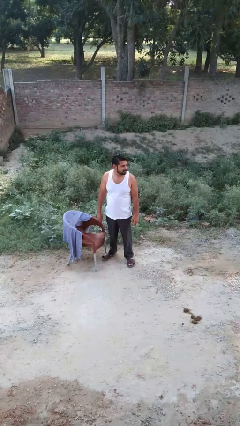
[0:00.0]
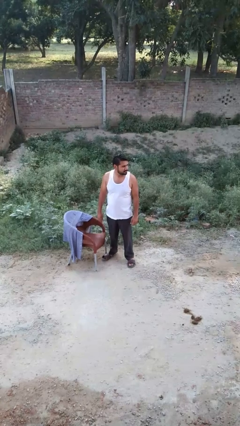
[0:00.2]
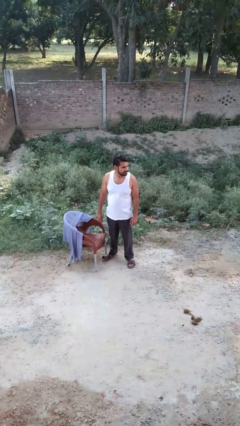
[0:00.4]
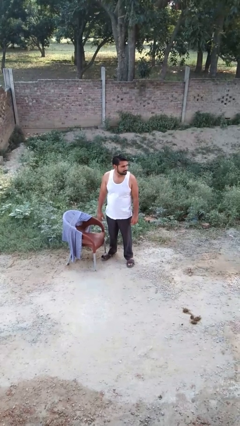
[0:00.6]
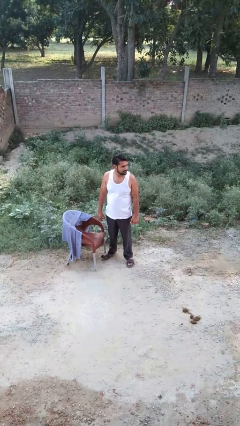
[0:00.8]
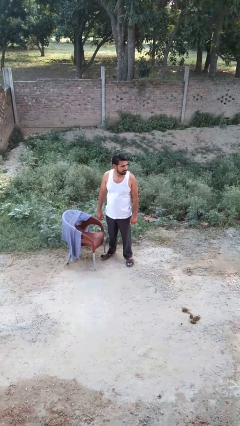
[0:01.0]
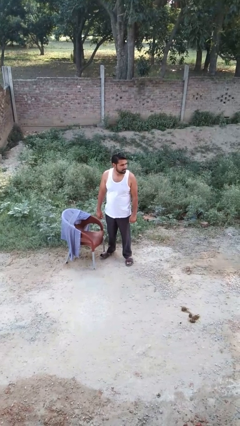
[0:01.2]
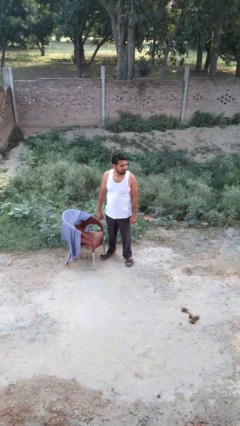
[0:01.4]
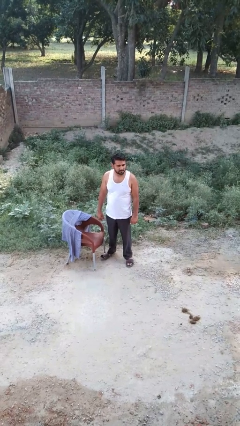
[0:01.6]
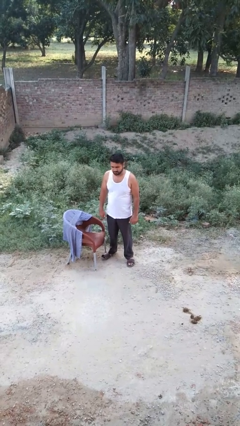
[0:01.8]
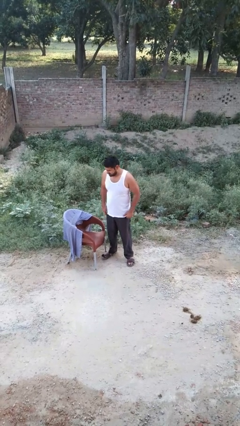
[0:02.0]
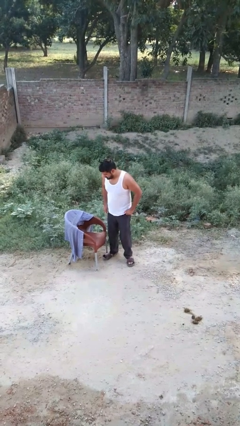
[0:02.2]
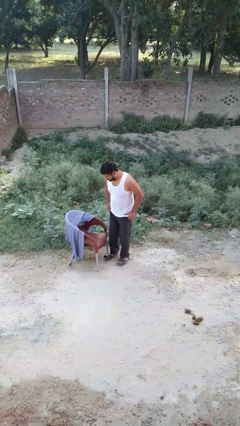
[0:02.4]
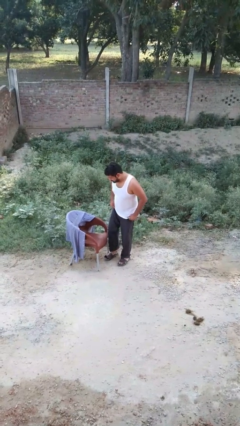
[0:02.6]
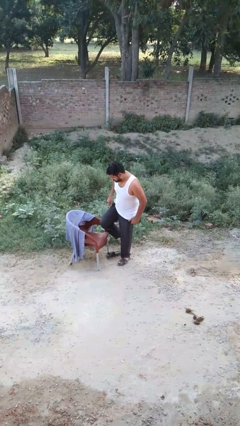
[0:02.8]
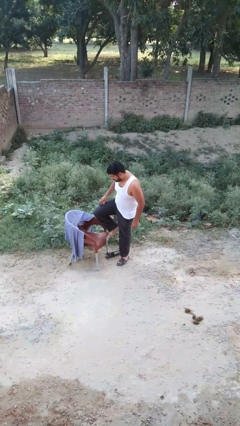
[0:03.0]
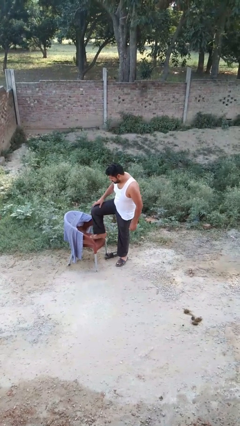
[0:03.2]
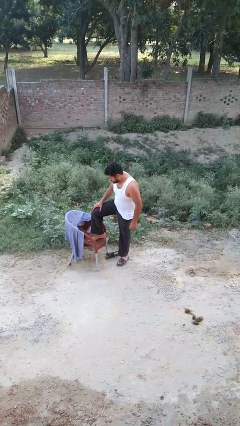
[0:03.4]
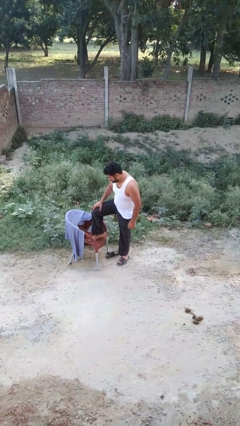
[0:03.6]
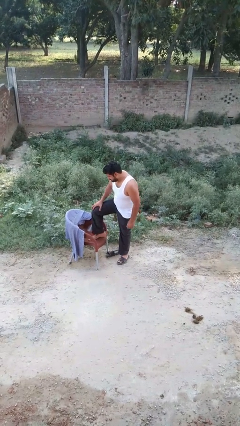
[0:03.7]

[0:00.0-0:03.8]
person puts feet up

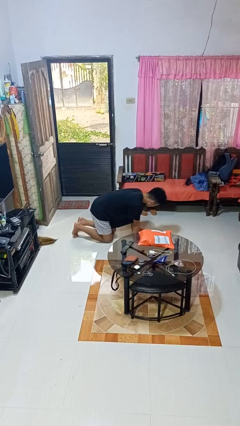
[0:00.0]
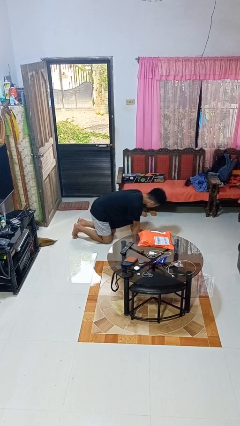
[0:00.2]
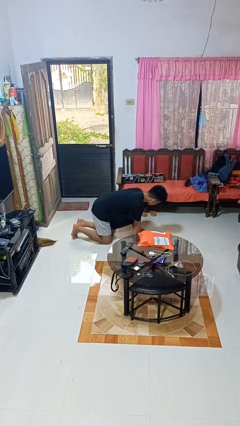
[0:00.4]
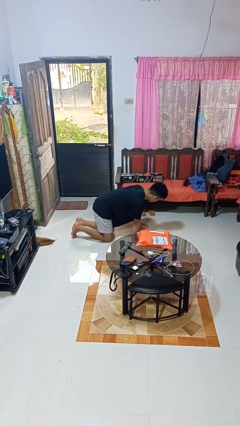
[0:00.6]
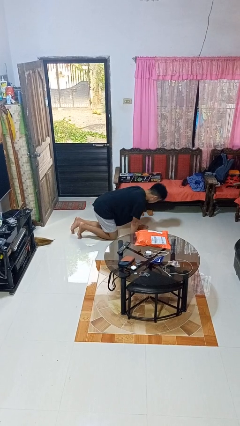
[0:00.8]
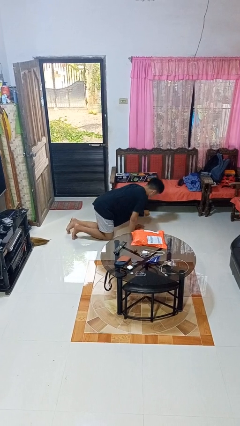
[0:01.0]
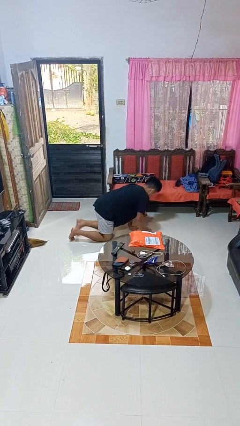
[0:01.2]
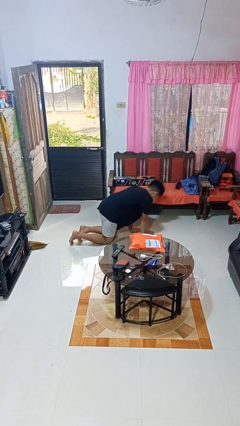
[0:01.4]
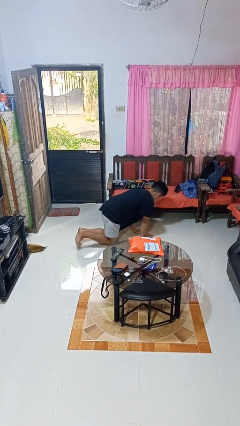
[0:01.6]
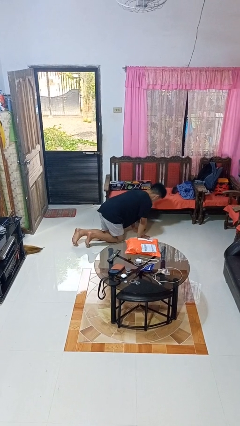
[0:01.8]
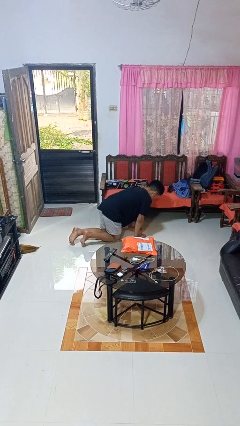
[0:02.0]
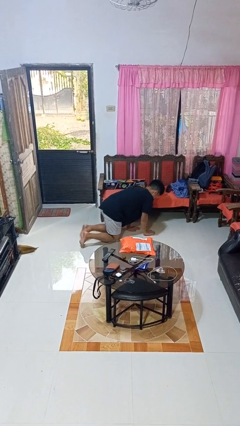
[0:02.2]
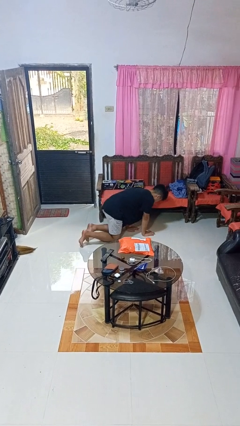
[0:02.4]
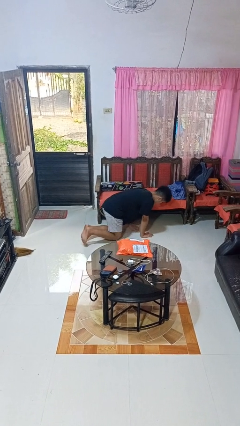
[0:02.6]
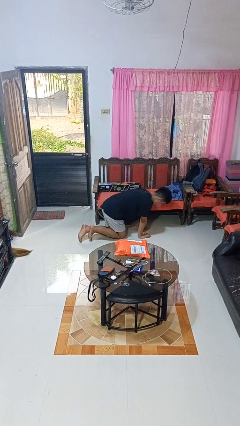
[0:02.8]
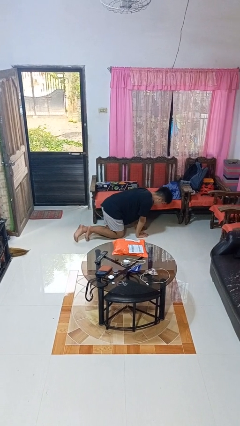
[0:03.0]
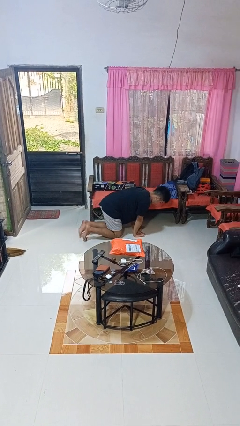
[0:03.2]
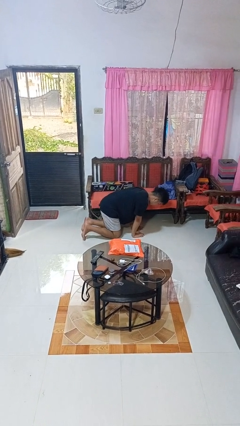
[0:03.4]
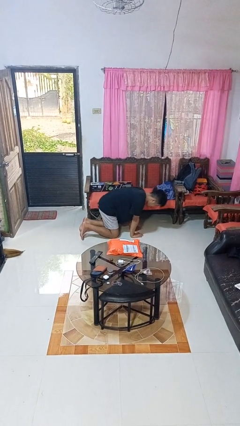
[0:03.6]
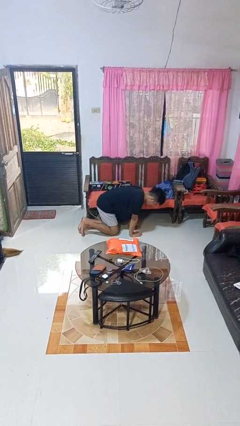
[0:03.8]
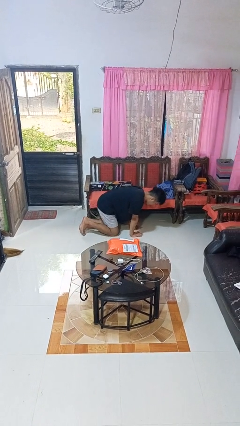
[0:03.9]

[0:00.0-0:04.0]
person crawls

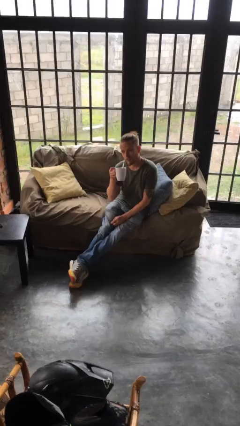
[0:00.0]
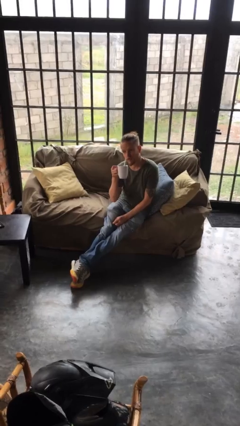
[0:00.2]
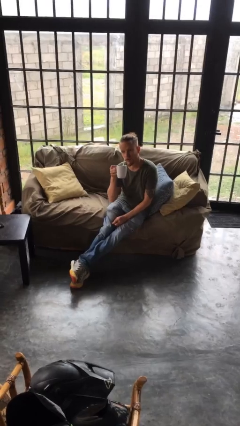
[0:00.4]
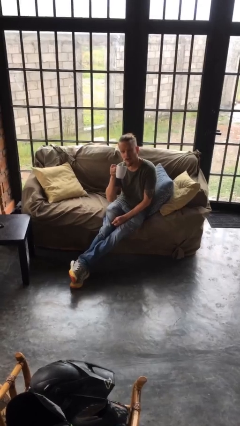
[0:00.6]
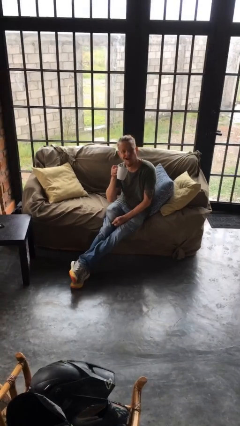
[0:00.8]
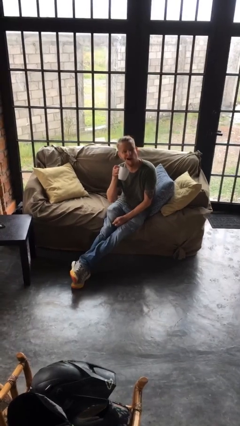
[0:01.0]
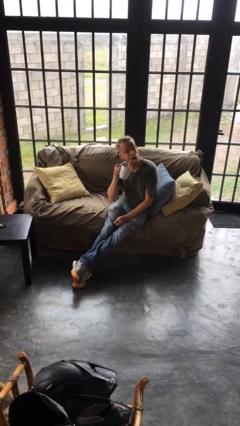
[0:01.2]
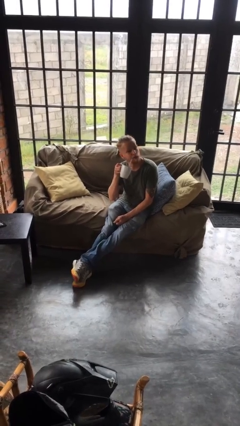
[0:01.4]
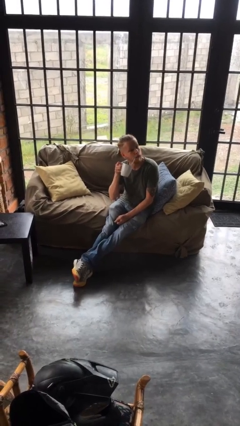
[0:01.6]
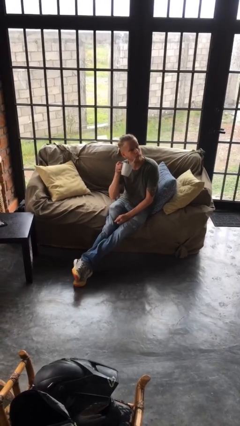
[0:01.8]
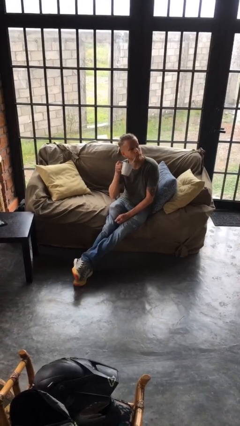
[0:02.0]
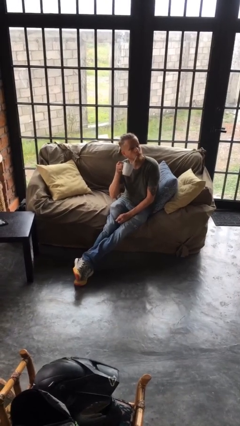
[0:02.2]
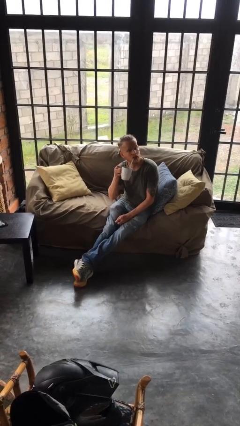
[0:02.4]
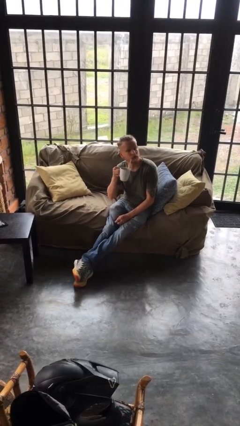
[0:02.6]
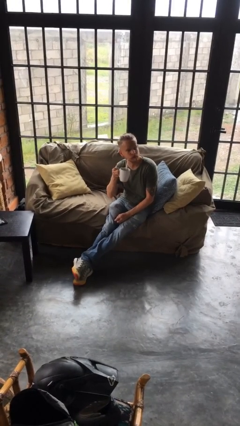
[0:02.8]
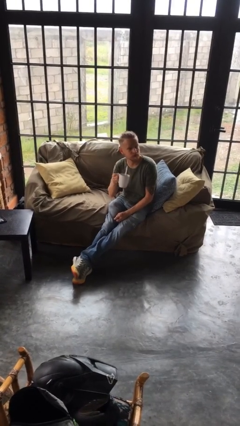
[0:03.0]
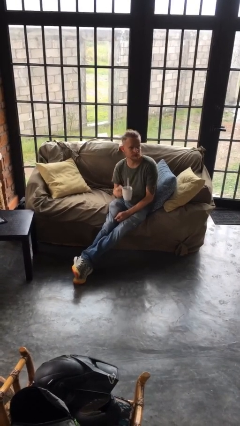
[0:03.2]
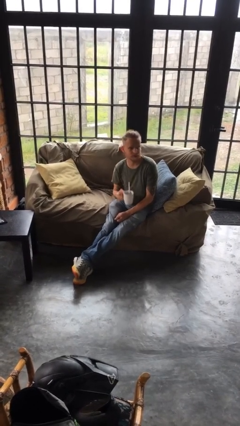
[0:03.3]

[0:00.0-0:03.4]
person drinks from straw

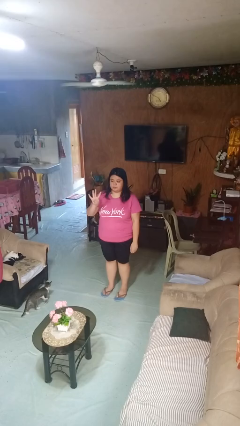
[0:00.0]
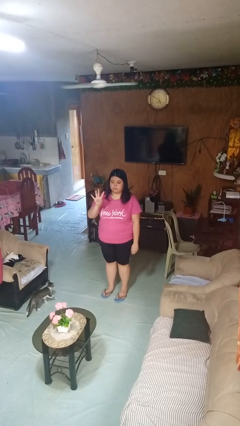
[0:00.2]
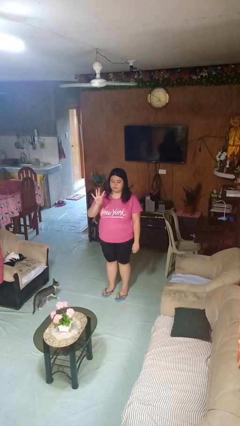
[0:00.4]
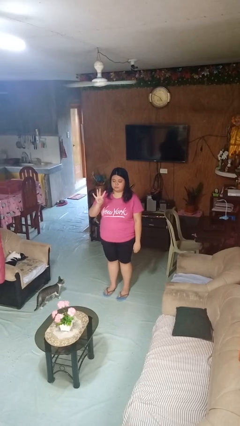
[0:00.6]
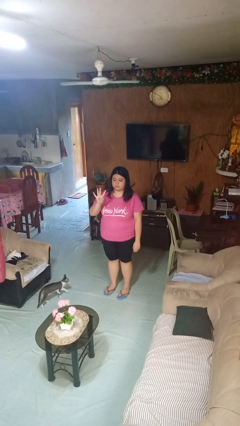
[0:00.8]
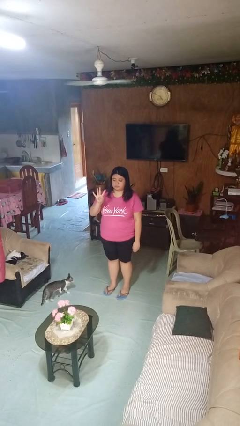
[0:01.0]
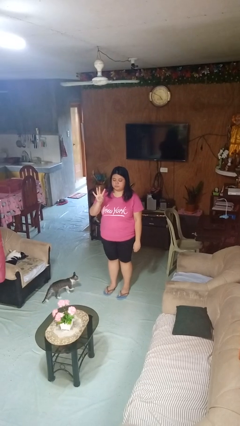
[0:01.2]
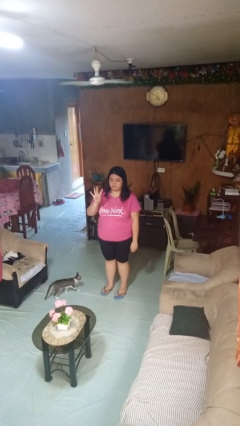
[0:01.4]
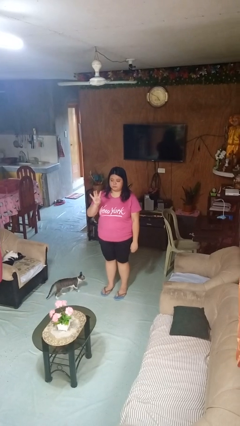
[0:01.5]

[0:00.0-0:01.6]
person gestures number four

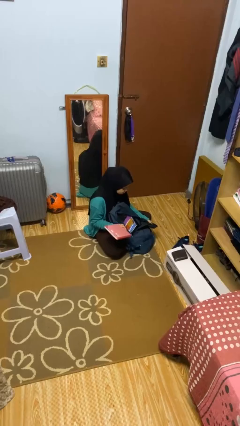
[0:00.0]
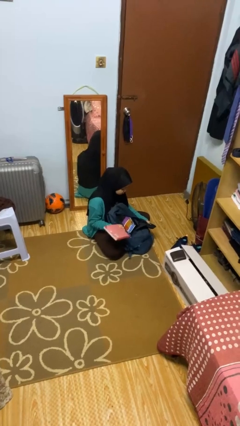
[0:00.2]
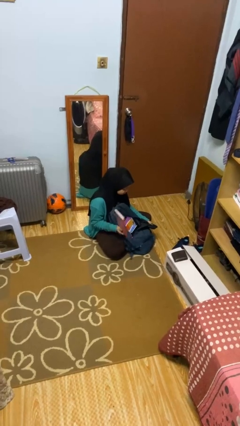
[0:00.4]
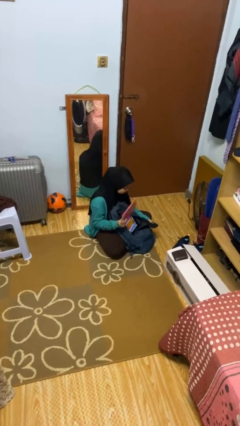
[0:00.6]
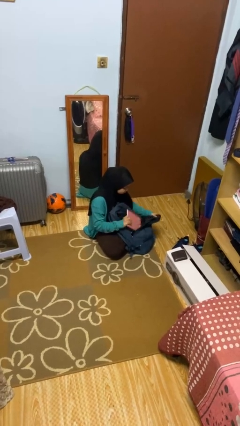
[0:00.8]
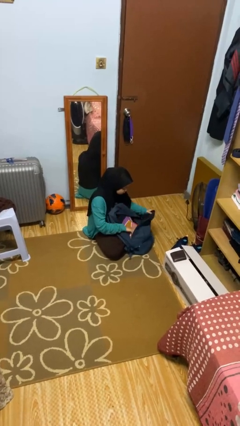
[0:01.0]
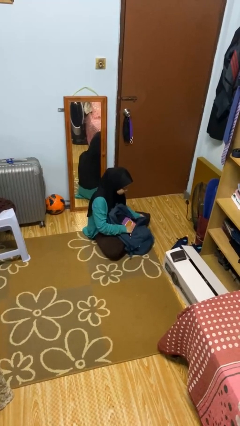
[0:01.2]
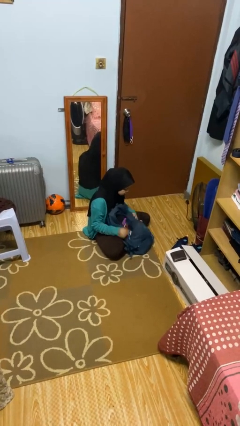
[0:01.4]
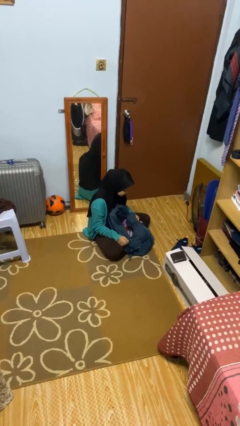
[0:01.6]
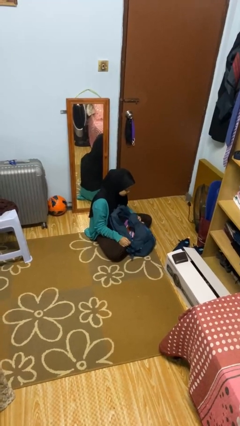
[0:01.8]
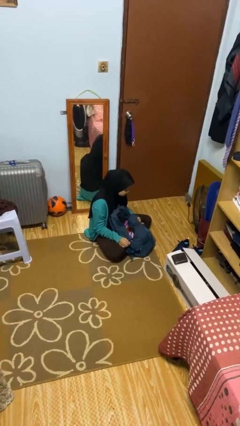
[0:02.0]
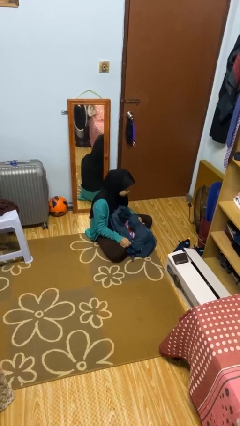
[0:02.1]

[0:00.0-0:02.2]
person puts object into backpack

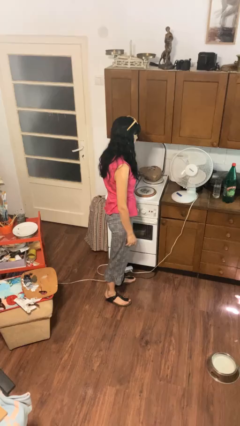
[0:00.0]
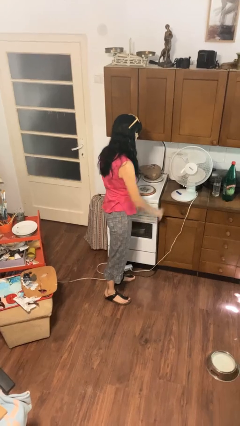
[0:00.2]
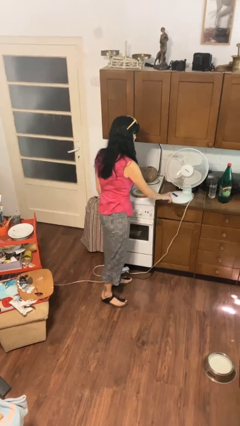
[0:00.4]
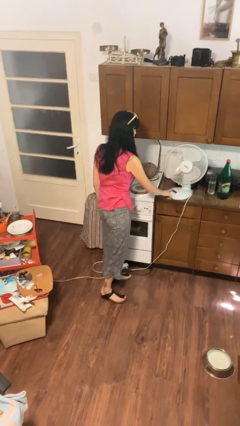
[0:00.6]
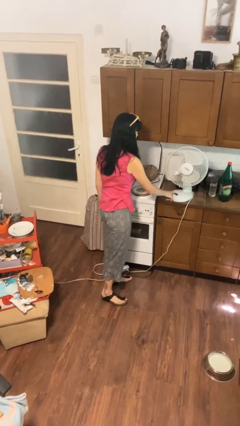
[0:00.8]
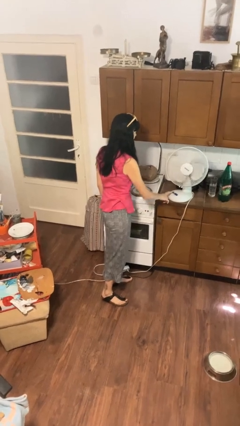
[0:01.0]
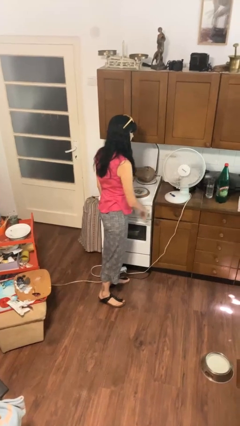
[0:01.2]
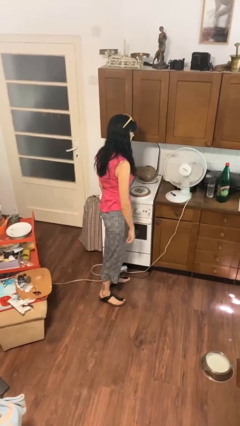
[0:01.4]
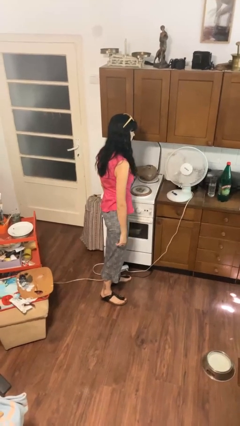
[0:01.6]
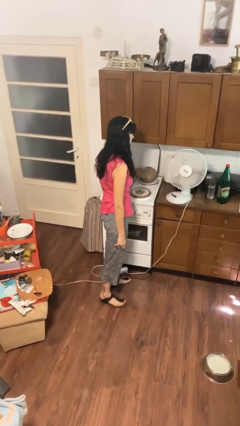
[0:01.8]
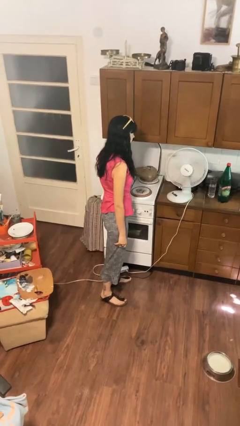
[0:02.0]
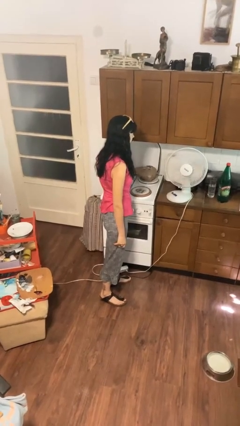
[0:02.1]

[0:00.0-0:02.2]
person turns on fan

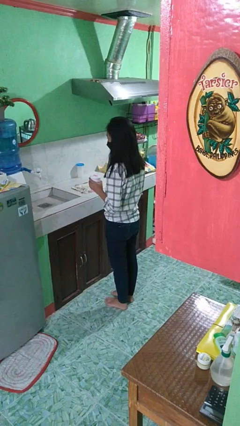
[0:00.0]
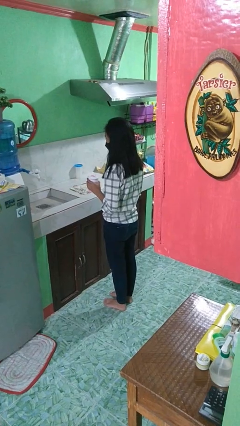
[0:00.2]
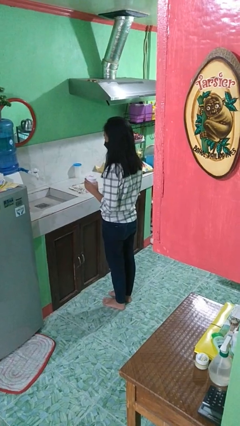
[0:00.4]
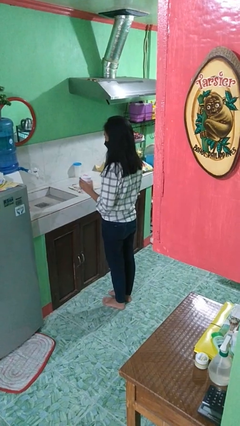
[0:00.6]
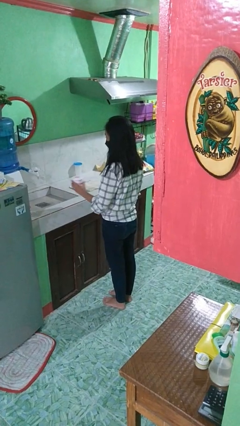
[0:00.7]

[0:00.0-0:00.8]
person puts down object on countertop
